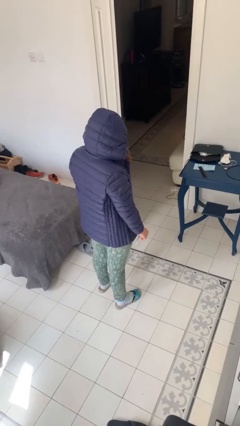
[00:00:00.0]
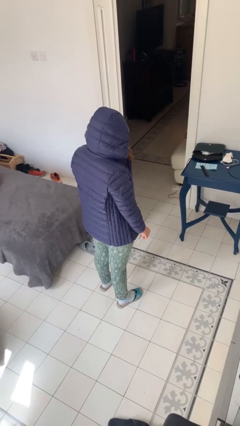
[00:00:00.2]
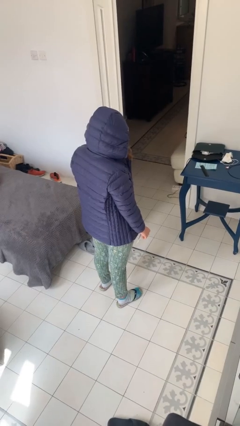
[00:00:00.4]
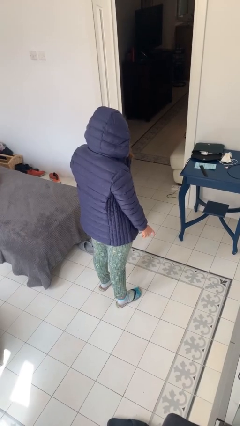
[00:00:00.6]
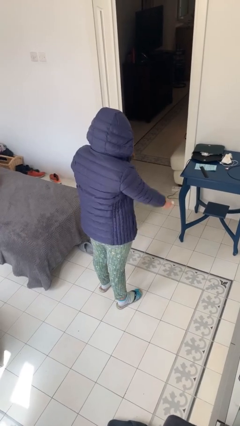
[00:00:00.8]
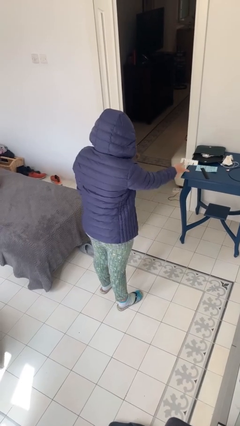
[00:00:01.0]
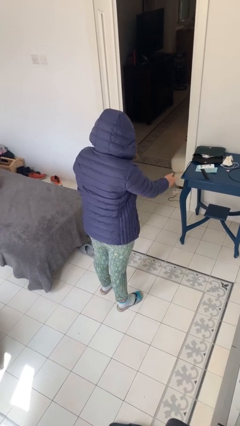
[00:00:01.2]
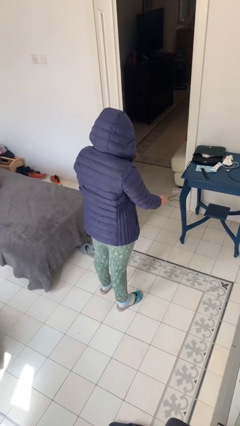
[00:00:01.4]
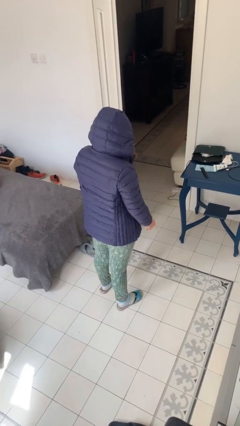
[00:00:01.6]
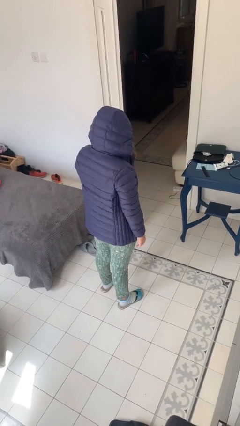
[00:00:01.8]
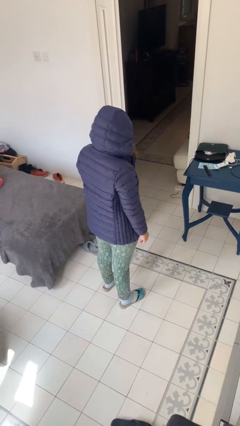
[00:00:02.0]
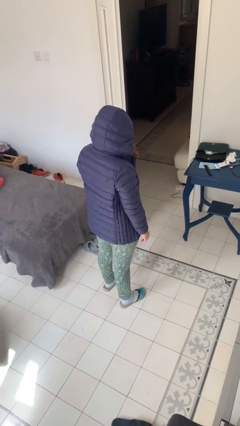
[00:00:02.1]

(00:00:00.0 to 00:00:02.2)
person throws object on table

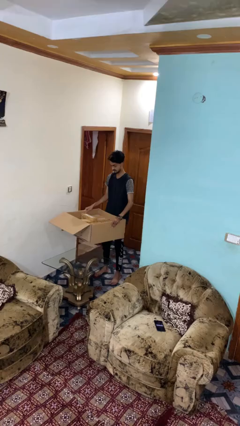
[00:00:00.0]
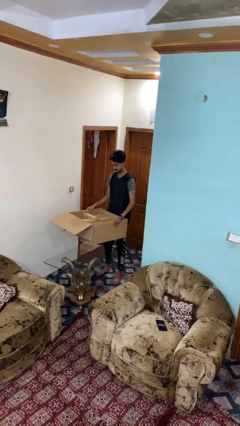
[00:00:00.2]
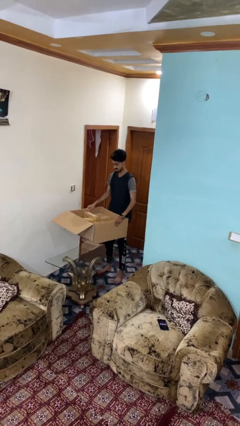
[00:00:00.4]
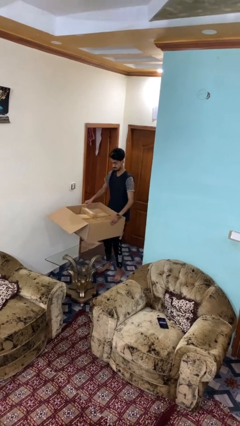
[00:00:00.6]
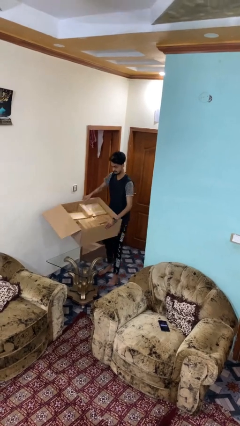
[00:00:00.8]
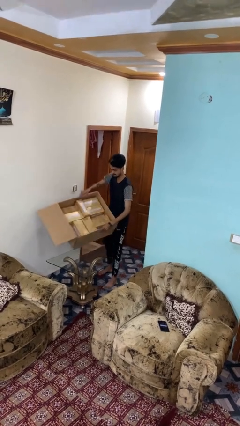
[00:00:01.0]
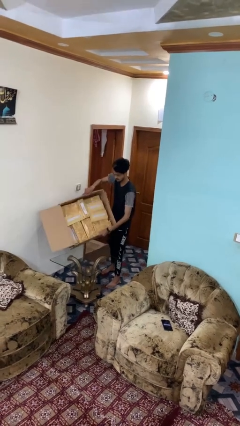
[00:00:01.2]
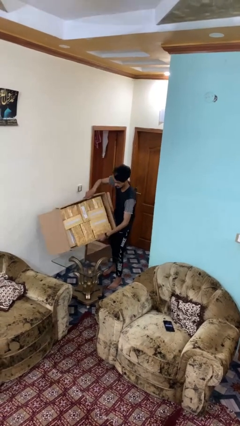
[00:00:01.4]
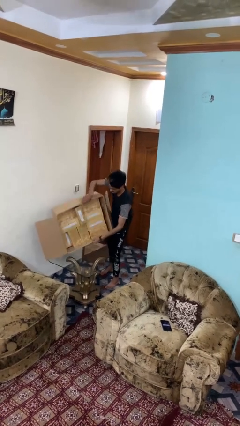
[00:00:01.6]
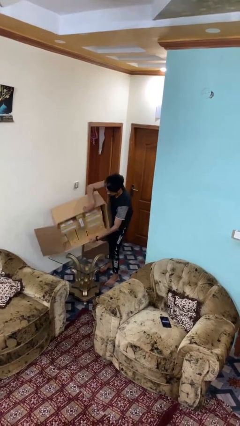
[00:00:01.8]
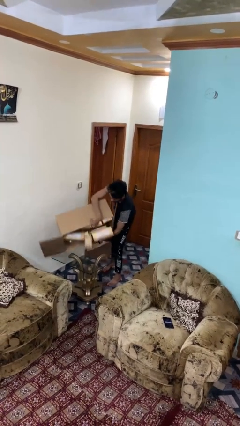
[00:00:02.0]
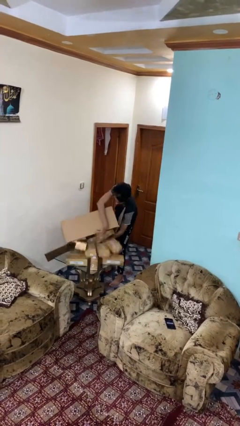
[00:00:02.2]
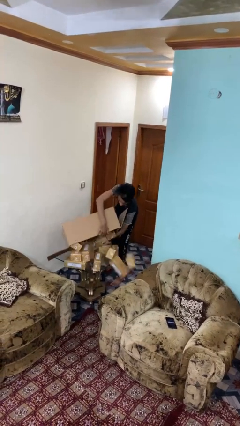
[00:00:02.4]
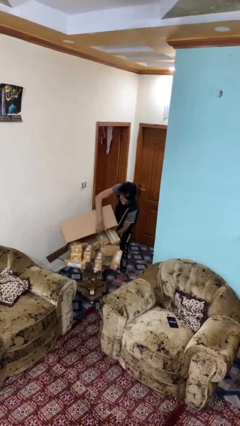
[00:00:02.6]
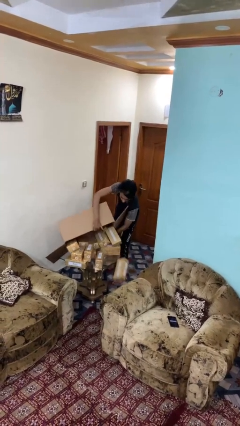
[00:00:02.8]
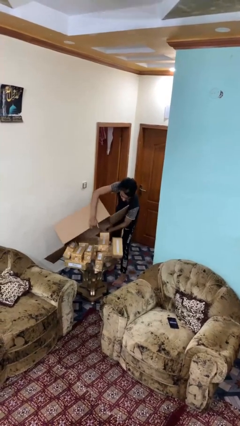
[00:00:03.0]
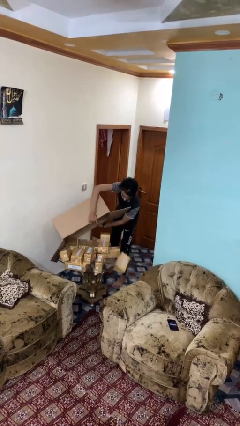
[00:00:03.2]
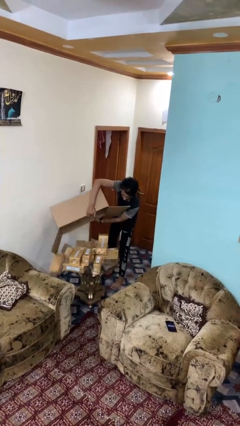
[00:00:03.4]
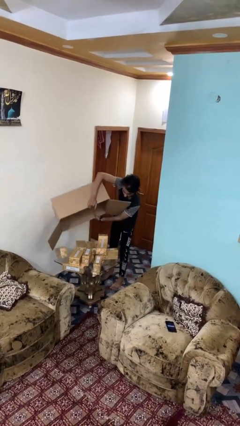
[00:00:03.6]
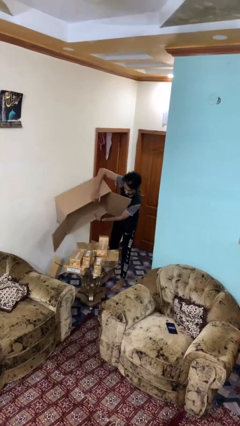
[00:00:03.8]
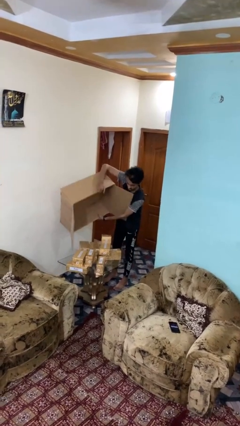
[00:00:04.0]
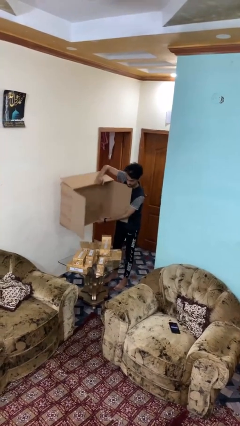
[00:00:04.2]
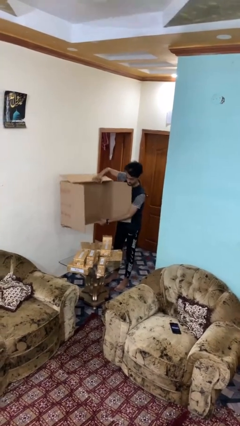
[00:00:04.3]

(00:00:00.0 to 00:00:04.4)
person unloads box onto table

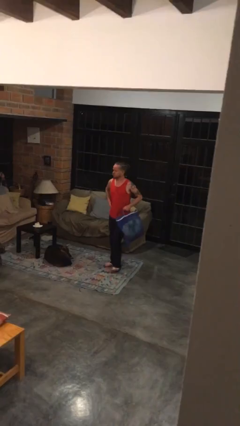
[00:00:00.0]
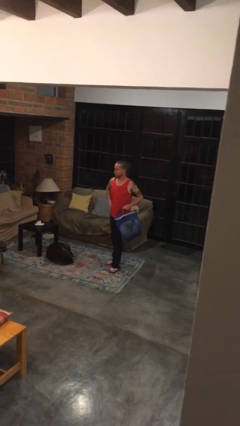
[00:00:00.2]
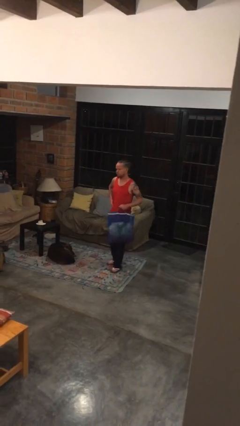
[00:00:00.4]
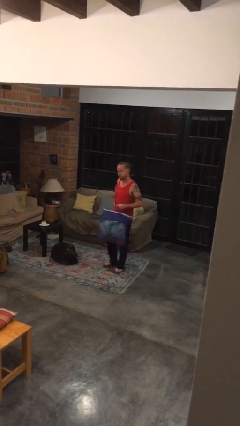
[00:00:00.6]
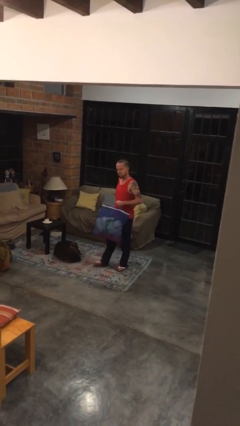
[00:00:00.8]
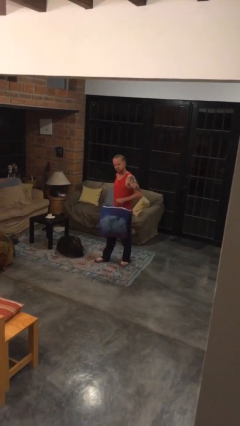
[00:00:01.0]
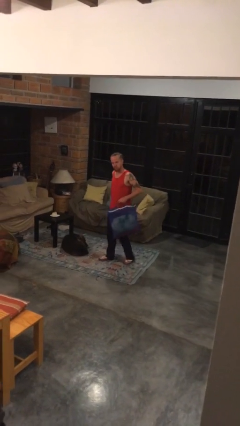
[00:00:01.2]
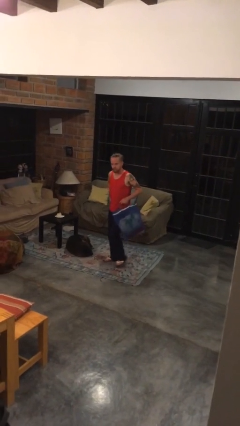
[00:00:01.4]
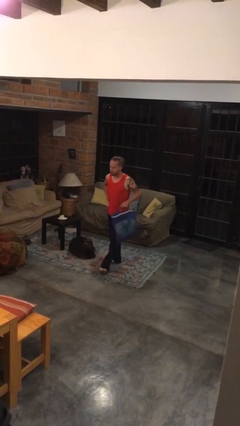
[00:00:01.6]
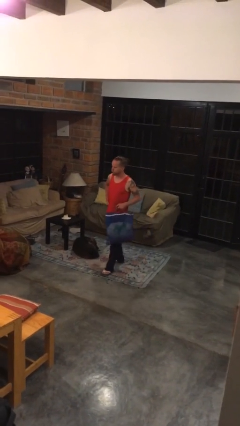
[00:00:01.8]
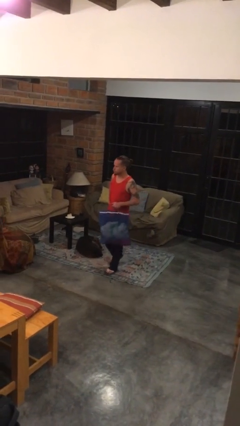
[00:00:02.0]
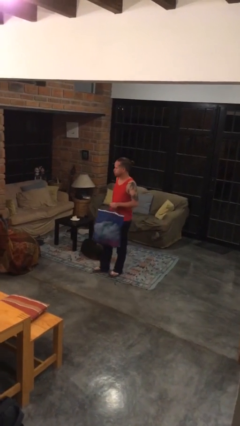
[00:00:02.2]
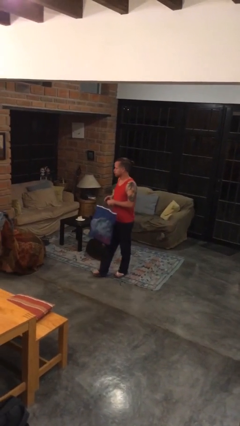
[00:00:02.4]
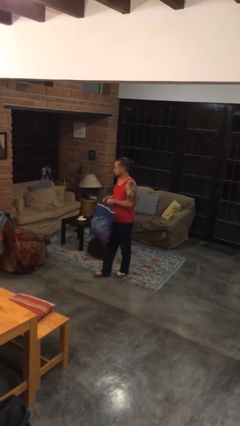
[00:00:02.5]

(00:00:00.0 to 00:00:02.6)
person carries groceries

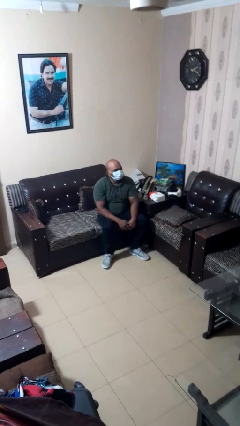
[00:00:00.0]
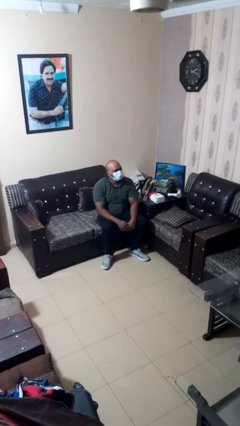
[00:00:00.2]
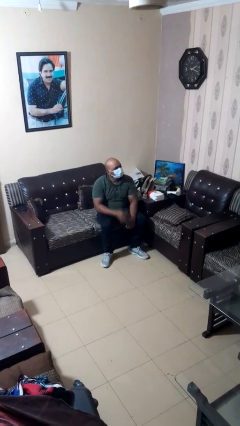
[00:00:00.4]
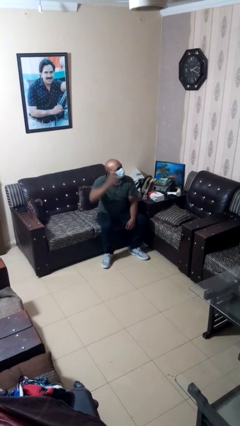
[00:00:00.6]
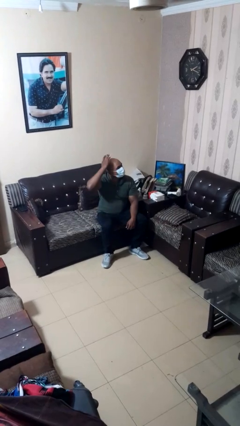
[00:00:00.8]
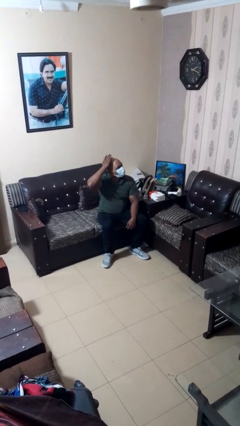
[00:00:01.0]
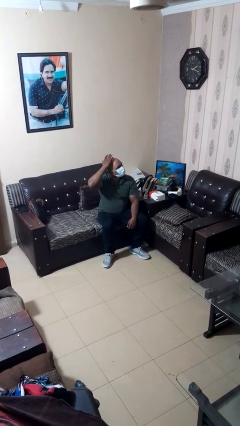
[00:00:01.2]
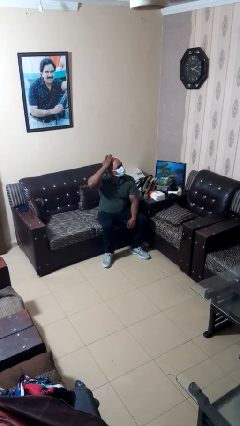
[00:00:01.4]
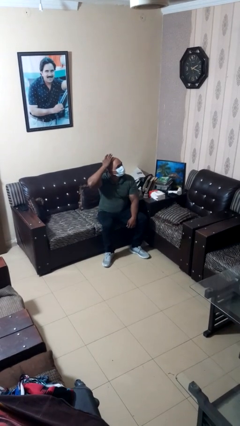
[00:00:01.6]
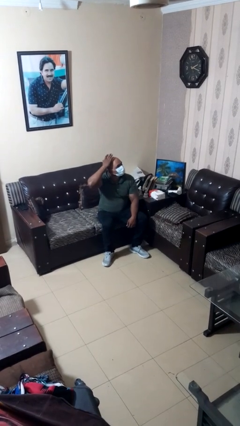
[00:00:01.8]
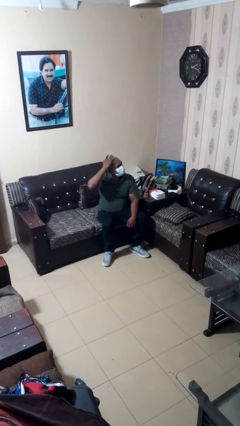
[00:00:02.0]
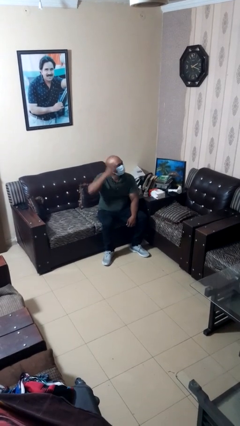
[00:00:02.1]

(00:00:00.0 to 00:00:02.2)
person pats head

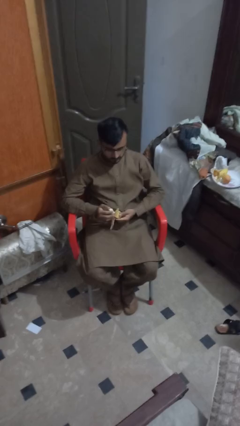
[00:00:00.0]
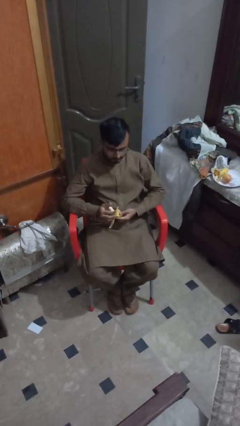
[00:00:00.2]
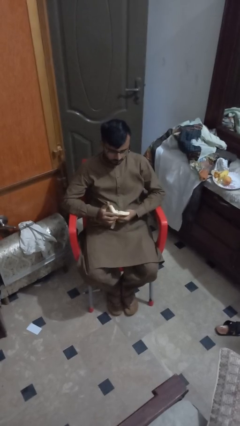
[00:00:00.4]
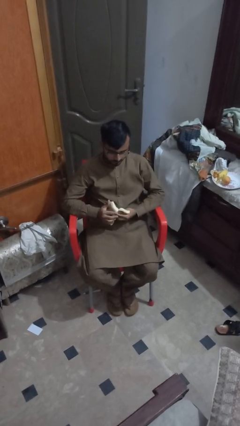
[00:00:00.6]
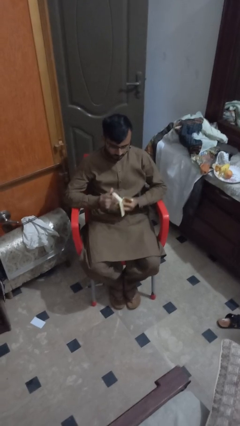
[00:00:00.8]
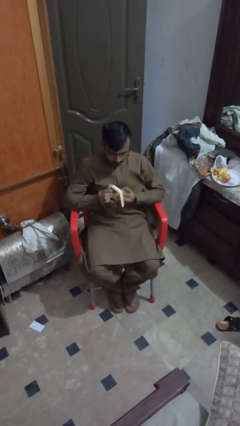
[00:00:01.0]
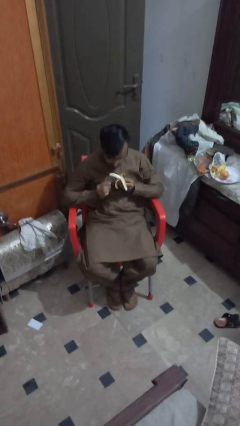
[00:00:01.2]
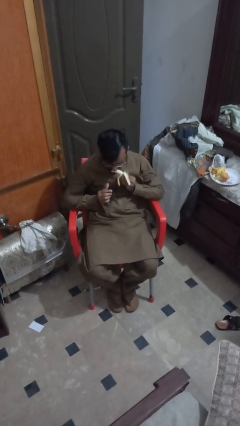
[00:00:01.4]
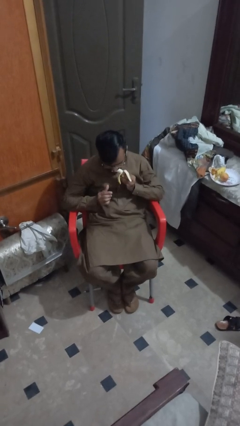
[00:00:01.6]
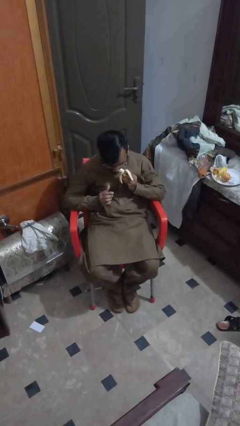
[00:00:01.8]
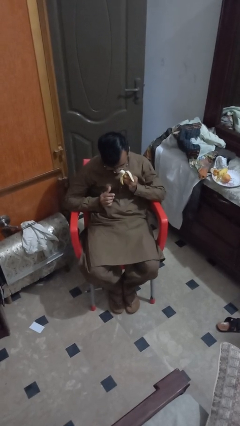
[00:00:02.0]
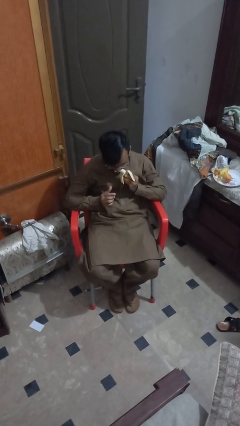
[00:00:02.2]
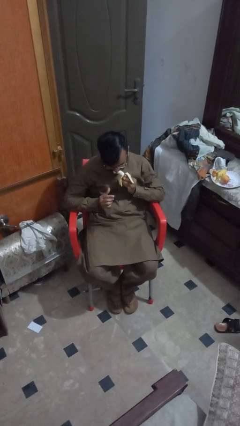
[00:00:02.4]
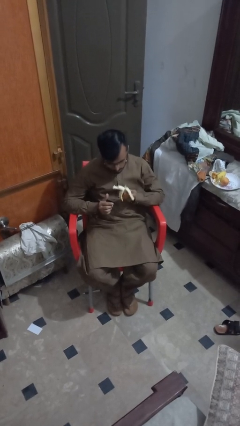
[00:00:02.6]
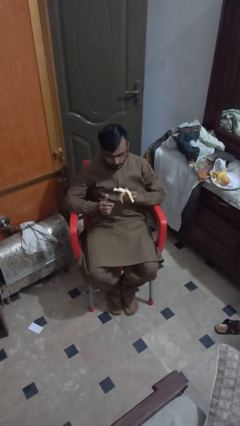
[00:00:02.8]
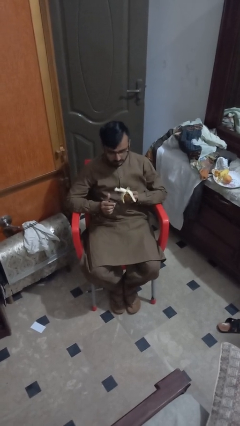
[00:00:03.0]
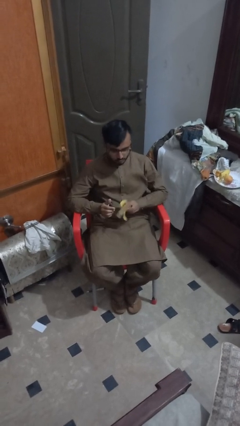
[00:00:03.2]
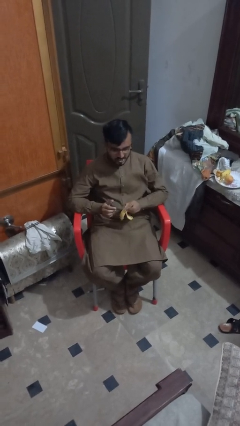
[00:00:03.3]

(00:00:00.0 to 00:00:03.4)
person eats banana

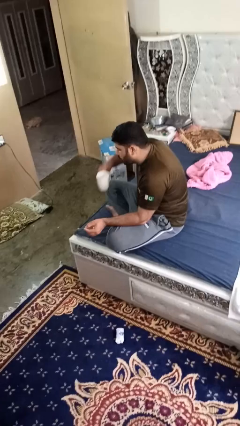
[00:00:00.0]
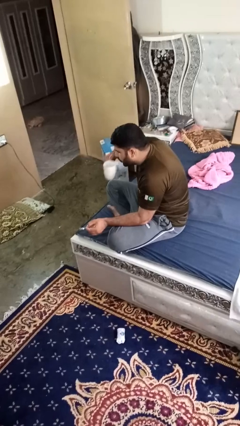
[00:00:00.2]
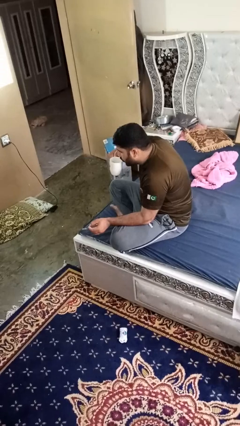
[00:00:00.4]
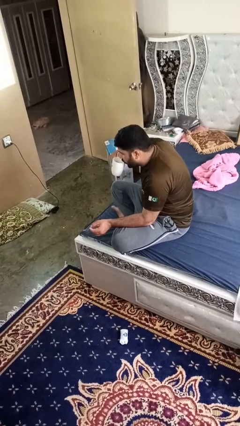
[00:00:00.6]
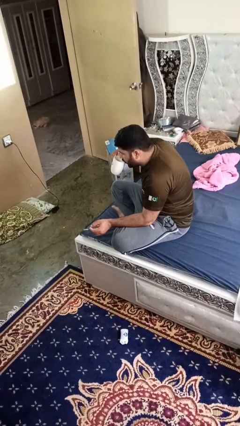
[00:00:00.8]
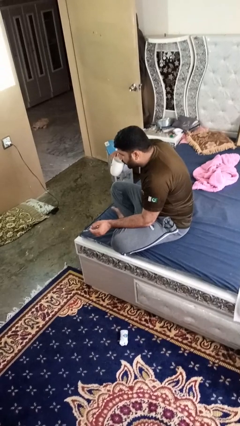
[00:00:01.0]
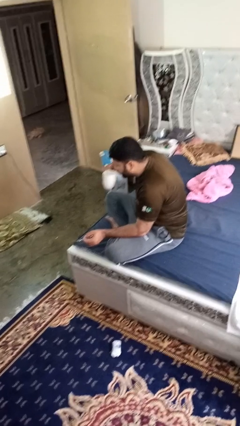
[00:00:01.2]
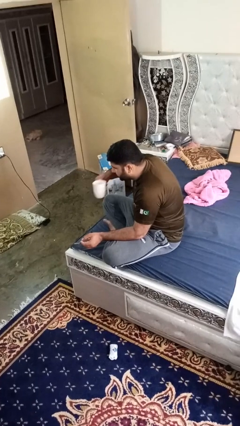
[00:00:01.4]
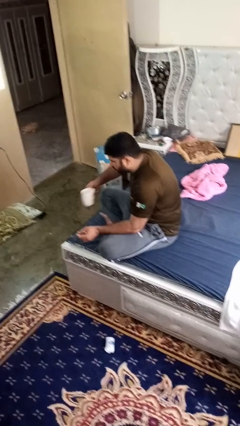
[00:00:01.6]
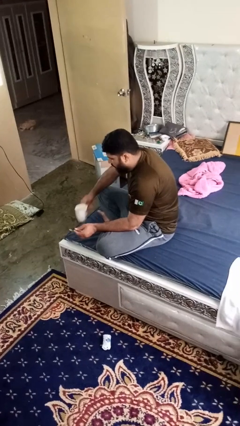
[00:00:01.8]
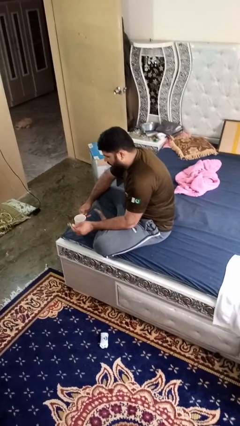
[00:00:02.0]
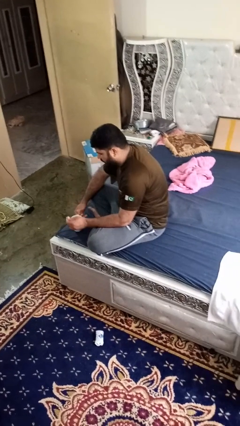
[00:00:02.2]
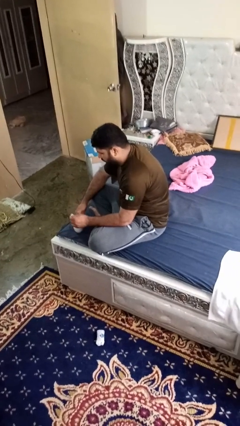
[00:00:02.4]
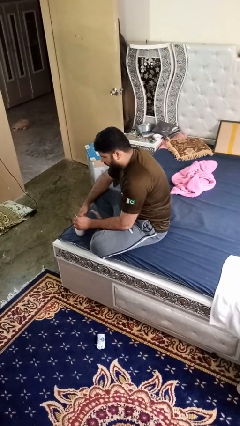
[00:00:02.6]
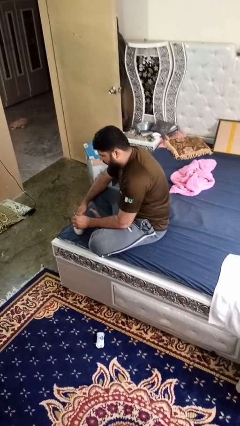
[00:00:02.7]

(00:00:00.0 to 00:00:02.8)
person drinks from mug
